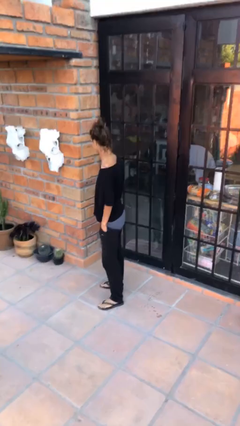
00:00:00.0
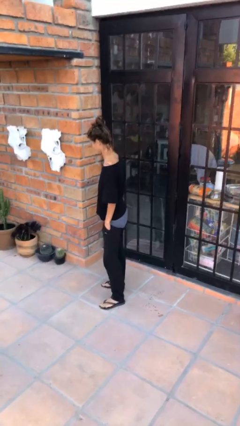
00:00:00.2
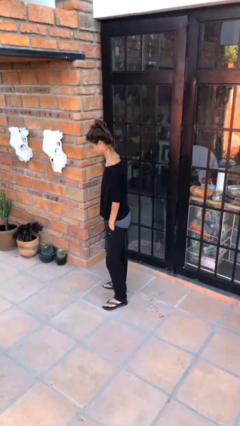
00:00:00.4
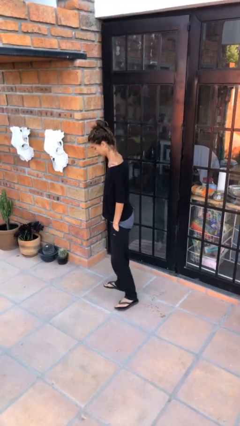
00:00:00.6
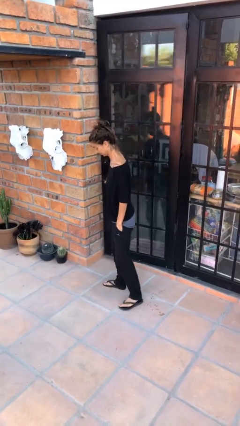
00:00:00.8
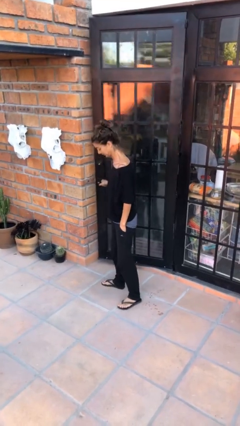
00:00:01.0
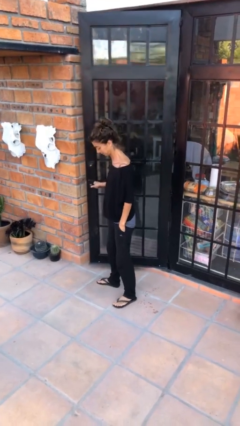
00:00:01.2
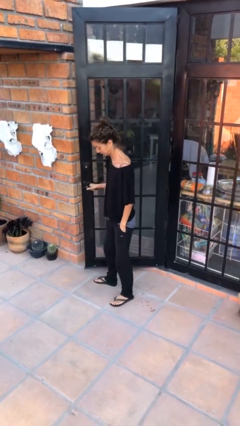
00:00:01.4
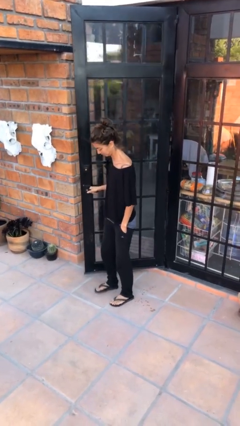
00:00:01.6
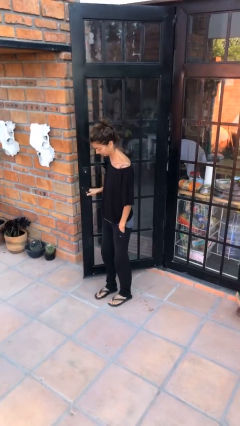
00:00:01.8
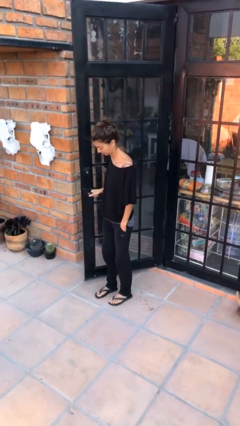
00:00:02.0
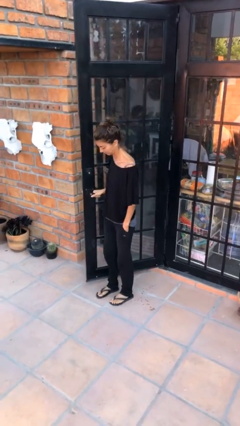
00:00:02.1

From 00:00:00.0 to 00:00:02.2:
person opens facility door

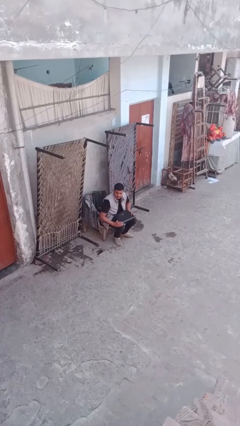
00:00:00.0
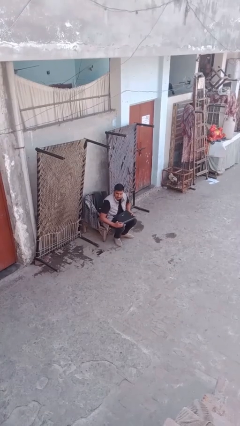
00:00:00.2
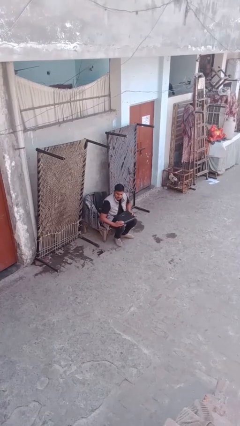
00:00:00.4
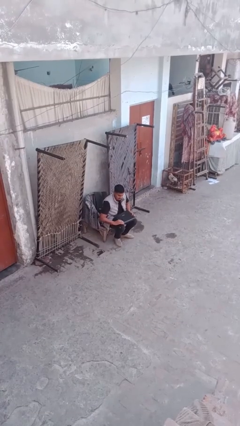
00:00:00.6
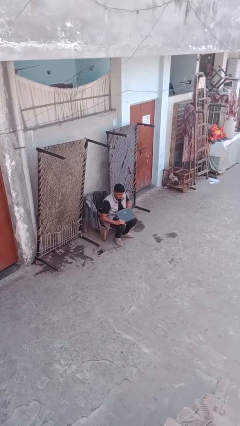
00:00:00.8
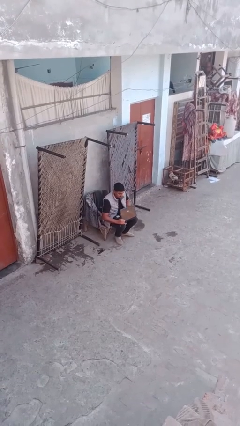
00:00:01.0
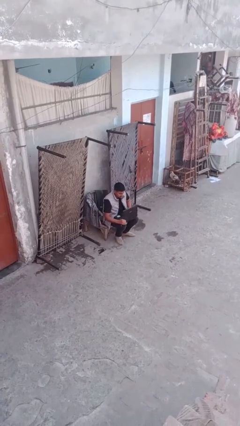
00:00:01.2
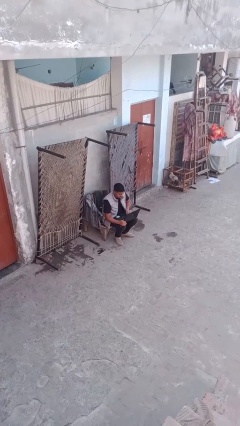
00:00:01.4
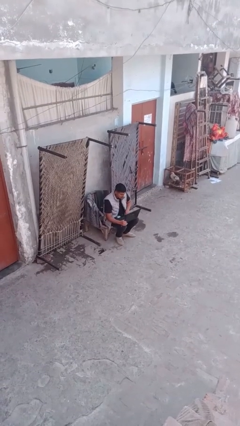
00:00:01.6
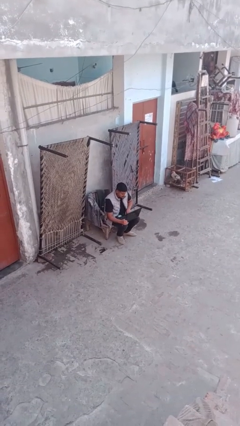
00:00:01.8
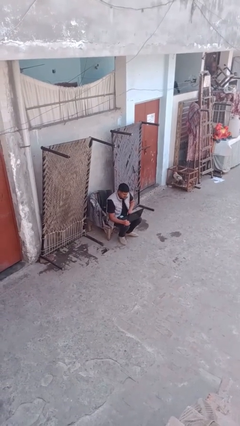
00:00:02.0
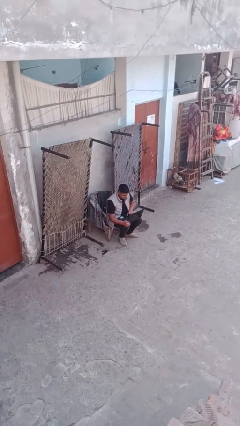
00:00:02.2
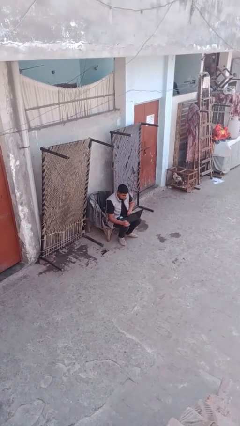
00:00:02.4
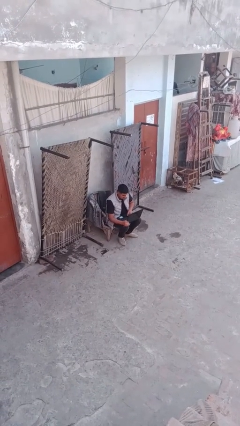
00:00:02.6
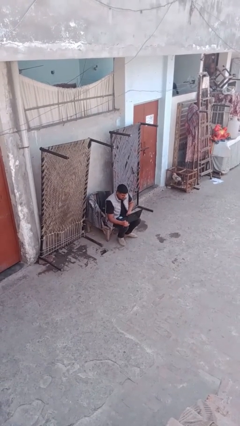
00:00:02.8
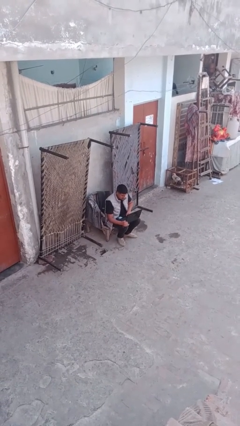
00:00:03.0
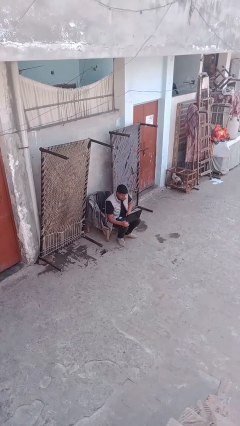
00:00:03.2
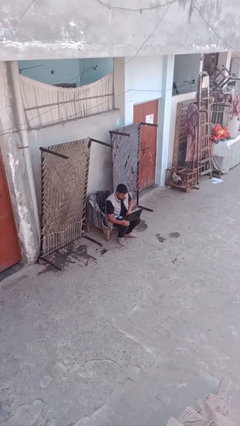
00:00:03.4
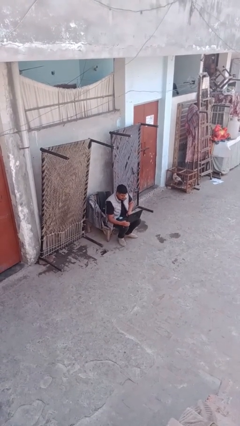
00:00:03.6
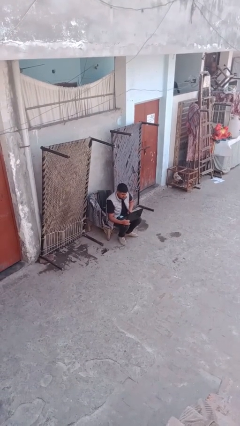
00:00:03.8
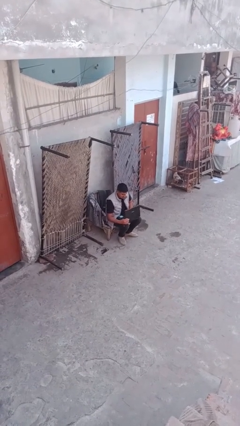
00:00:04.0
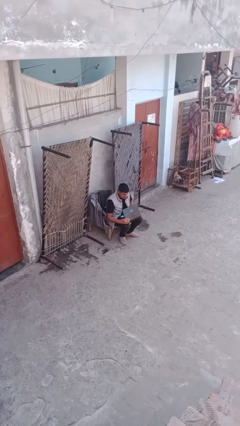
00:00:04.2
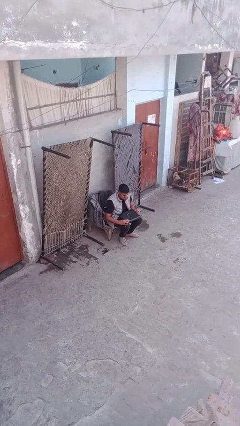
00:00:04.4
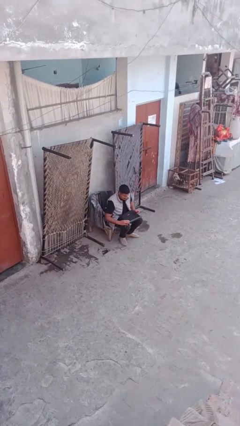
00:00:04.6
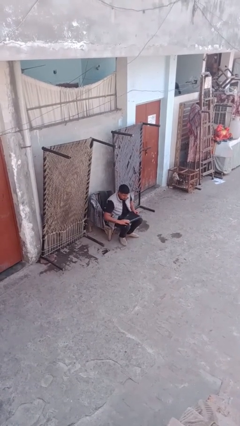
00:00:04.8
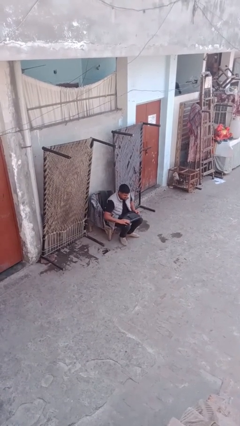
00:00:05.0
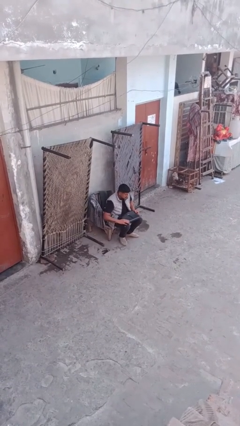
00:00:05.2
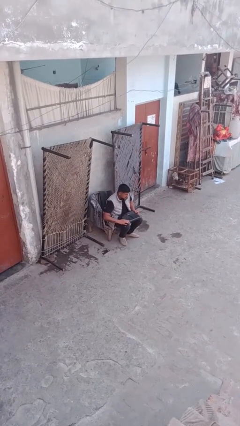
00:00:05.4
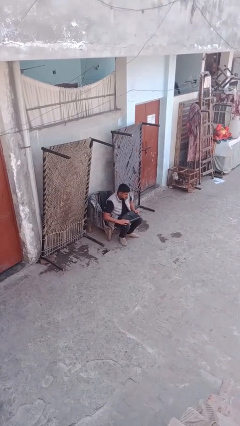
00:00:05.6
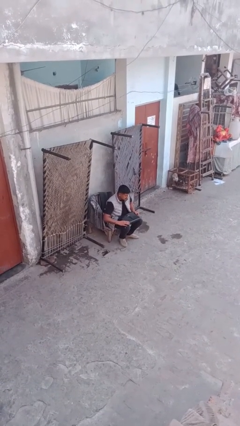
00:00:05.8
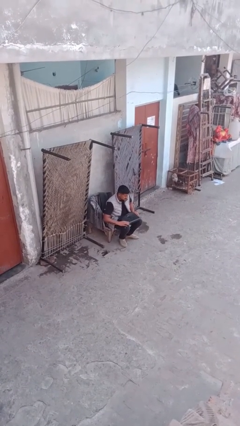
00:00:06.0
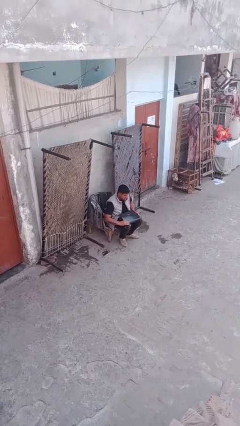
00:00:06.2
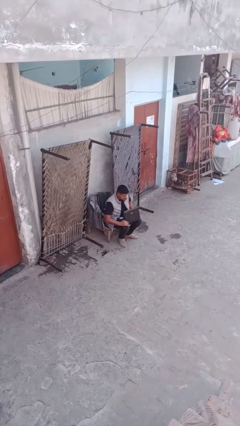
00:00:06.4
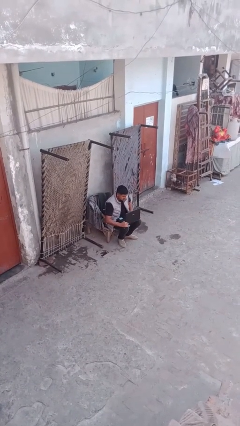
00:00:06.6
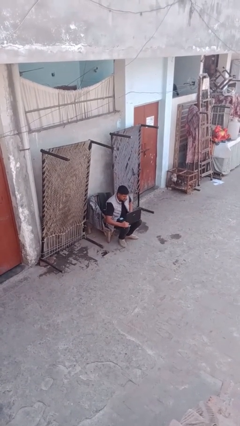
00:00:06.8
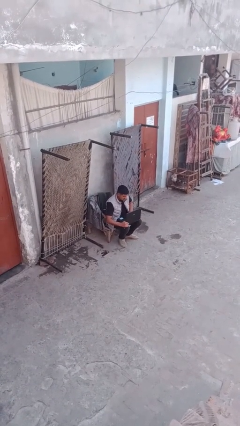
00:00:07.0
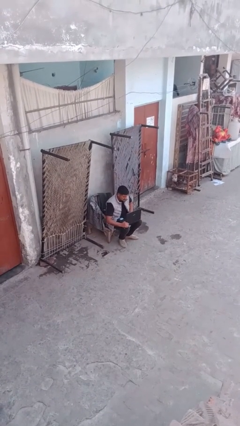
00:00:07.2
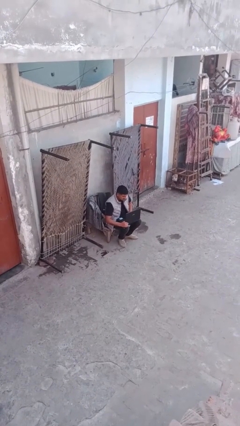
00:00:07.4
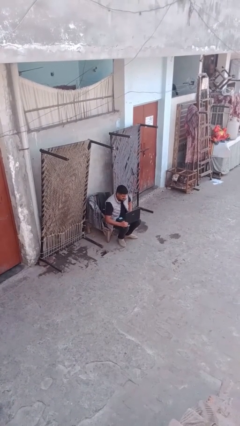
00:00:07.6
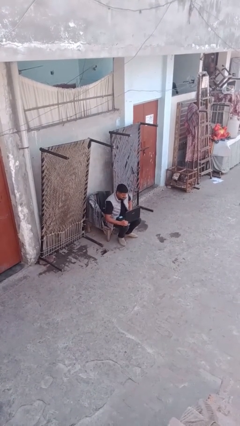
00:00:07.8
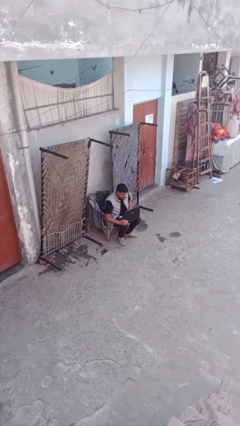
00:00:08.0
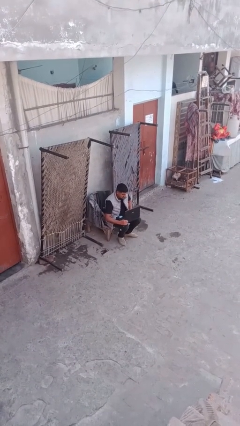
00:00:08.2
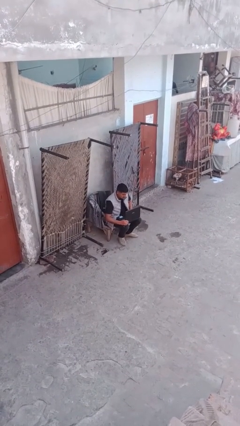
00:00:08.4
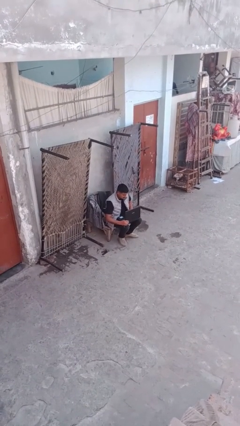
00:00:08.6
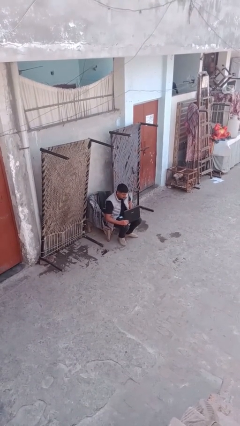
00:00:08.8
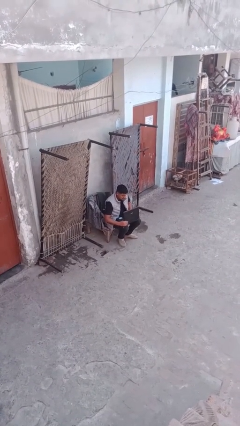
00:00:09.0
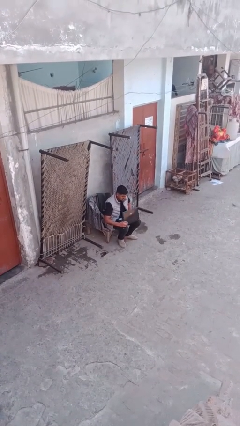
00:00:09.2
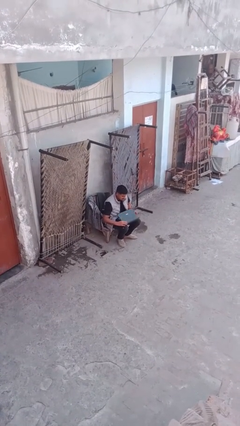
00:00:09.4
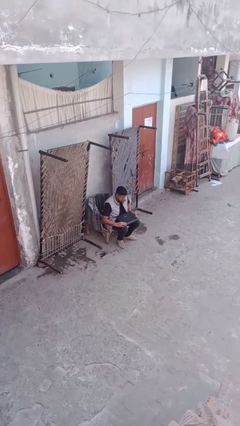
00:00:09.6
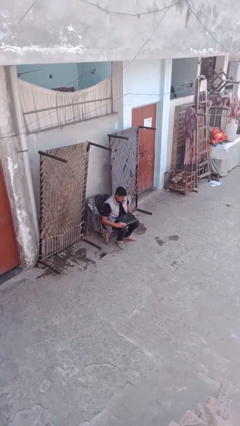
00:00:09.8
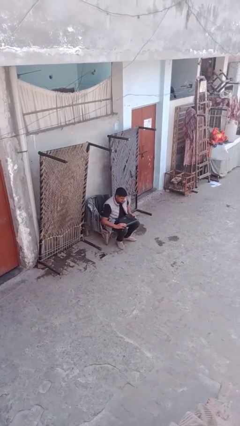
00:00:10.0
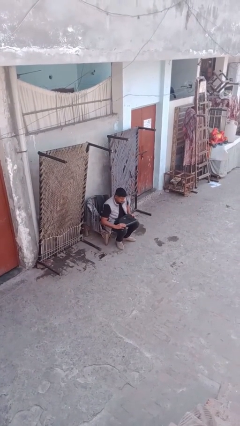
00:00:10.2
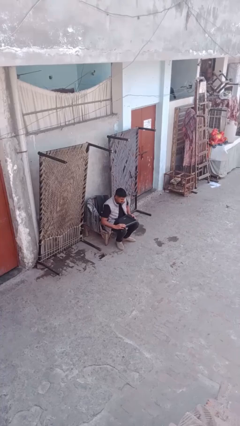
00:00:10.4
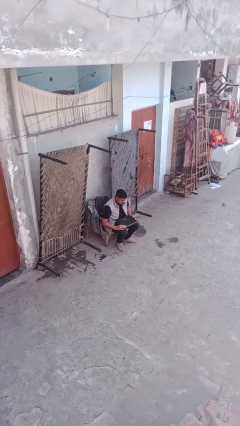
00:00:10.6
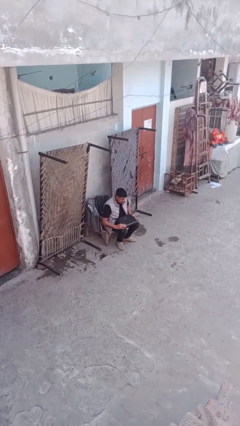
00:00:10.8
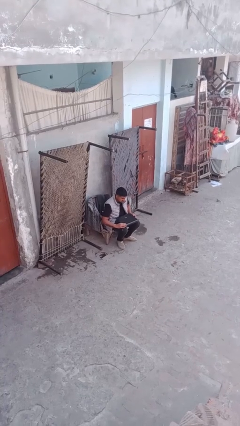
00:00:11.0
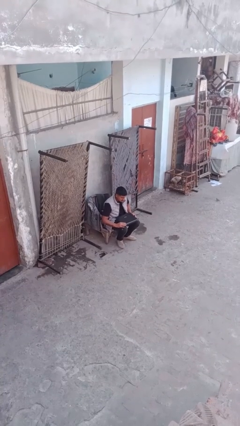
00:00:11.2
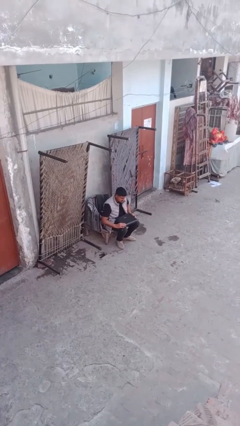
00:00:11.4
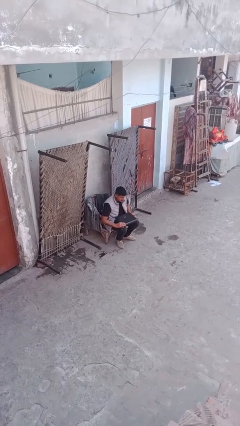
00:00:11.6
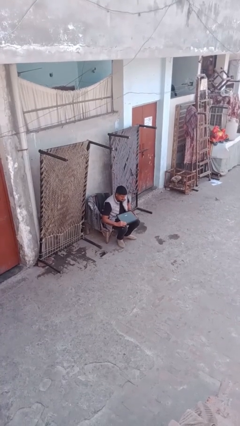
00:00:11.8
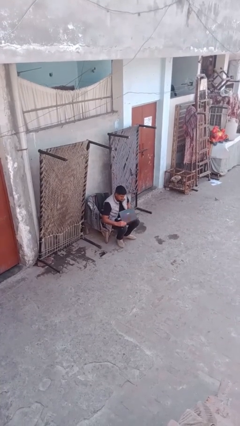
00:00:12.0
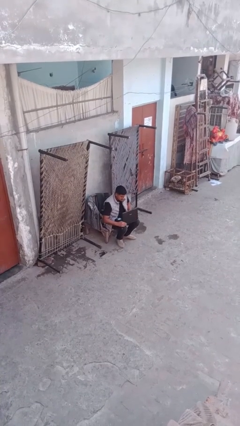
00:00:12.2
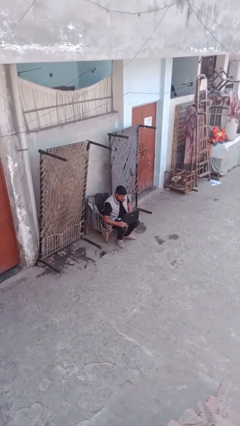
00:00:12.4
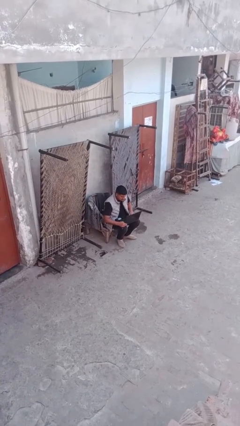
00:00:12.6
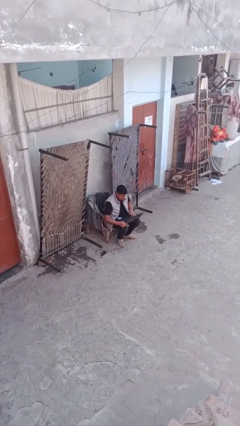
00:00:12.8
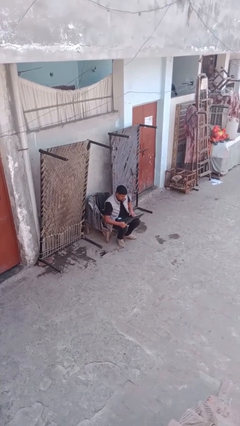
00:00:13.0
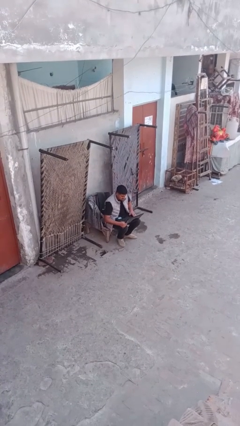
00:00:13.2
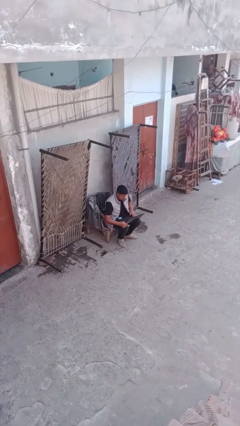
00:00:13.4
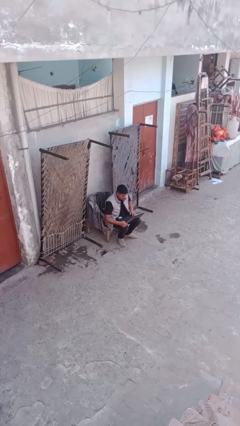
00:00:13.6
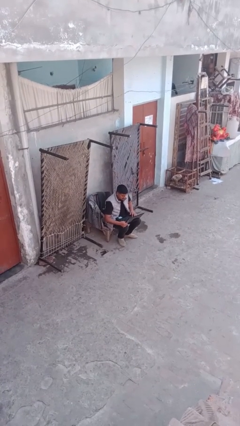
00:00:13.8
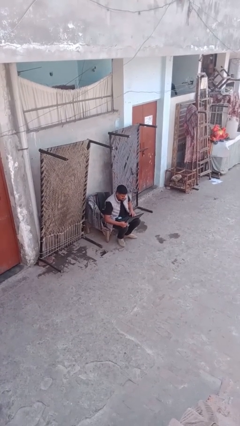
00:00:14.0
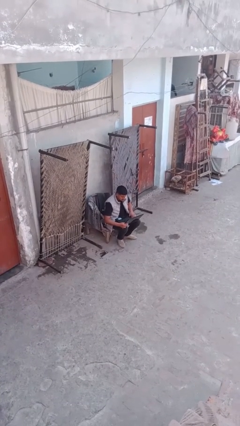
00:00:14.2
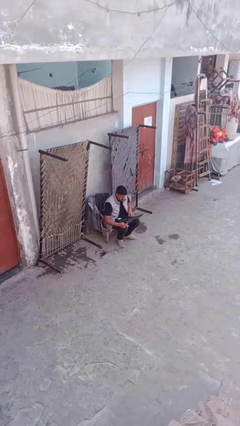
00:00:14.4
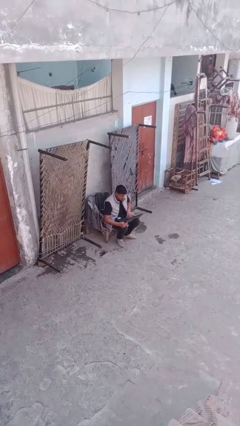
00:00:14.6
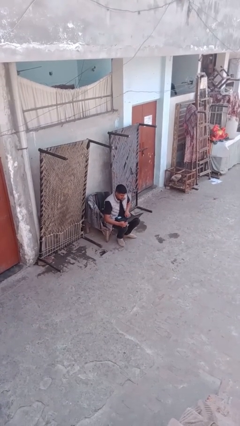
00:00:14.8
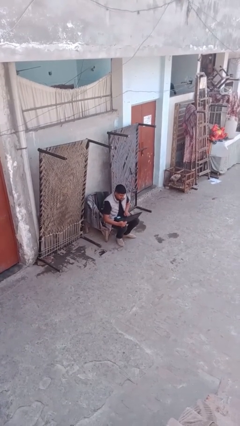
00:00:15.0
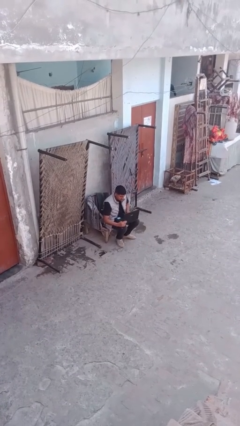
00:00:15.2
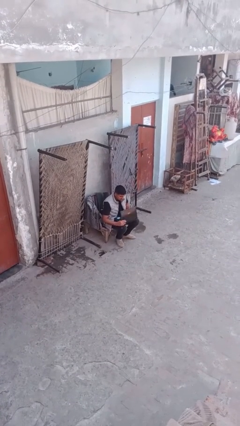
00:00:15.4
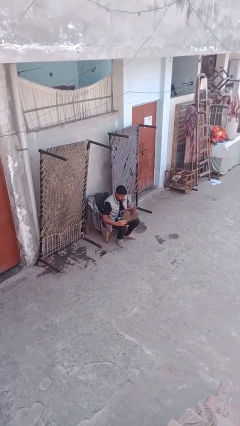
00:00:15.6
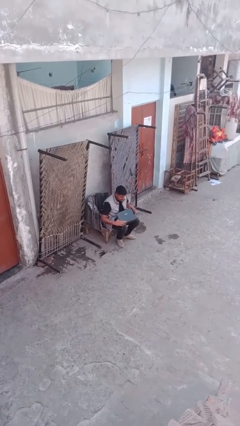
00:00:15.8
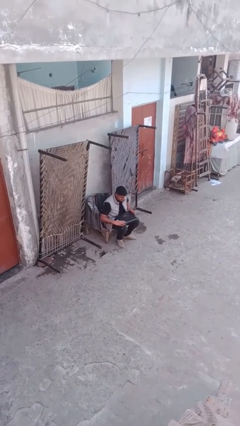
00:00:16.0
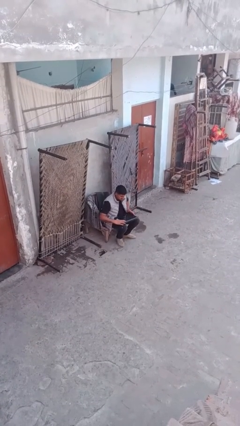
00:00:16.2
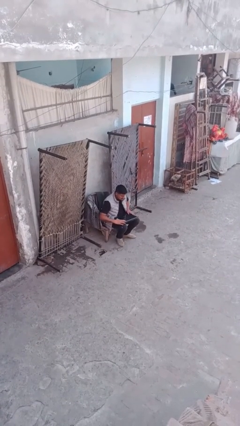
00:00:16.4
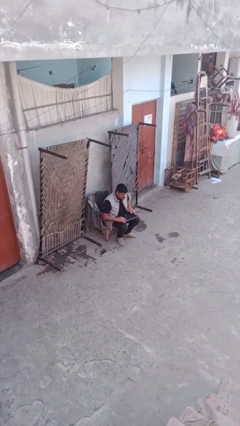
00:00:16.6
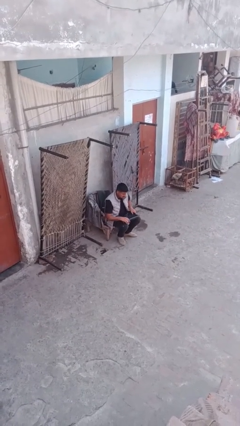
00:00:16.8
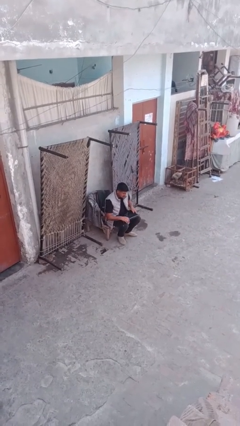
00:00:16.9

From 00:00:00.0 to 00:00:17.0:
person interacts with laptop
